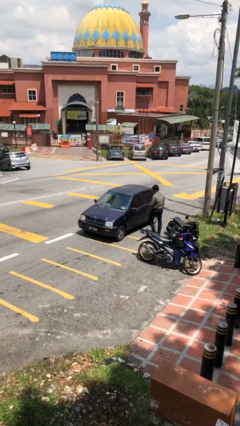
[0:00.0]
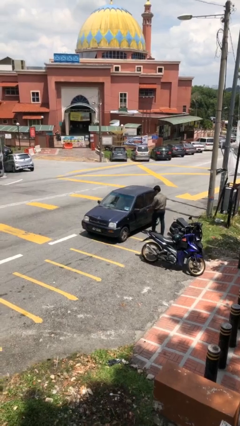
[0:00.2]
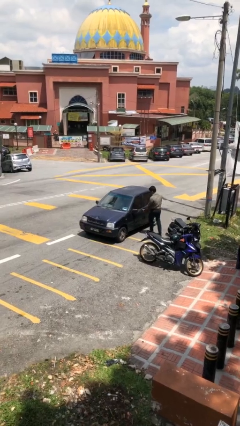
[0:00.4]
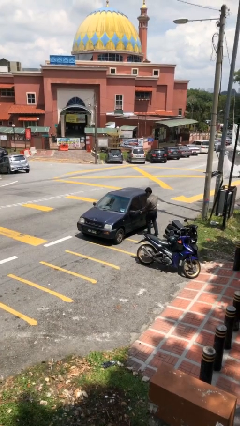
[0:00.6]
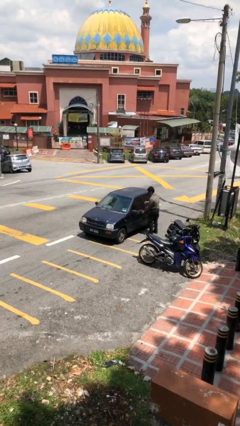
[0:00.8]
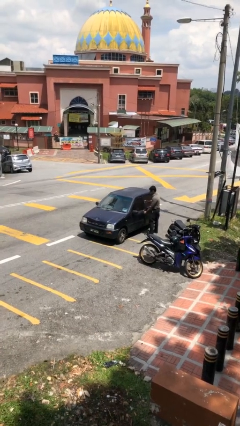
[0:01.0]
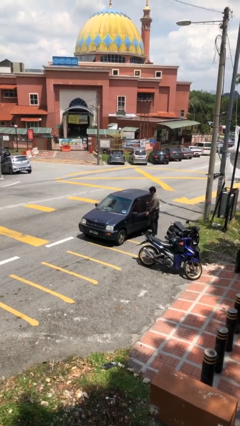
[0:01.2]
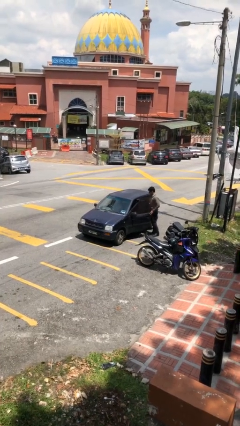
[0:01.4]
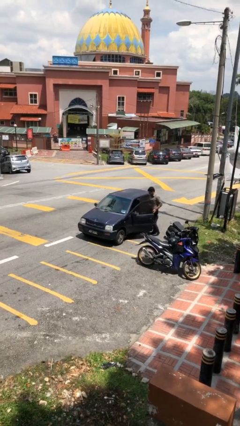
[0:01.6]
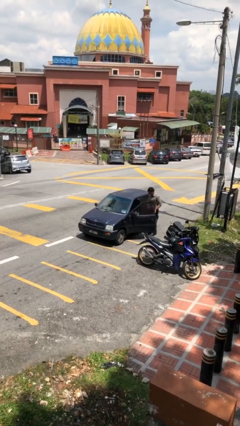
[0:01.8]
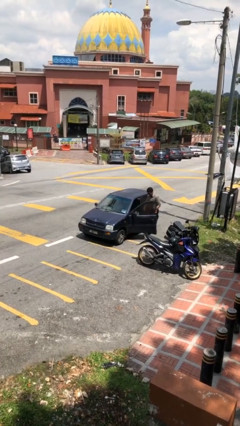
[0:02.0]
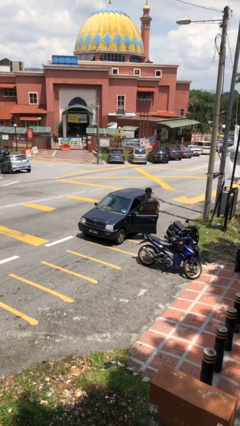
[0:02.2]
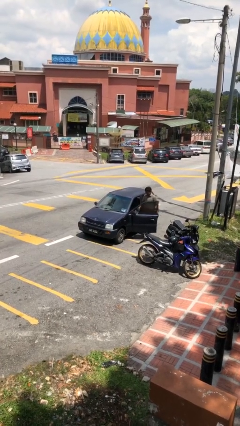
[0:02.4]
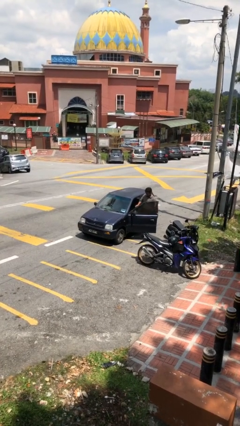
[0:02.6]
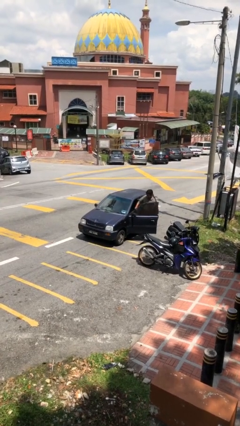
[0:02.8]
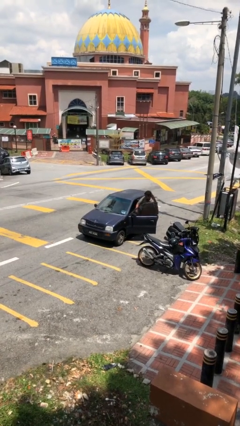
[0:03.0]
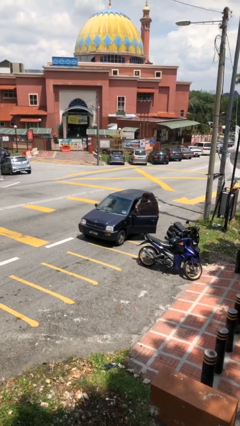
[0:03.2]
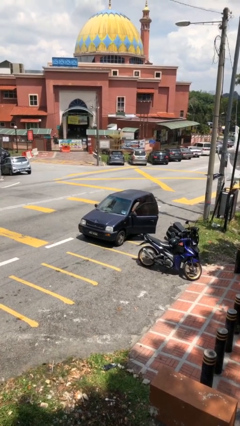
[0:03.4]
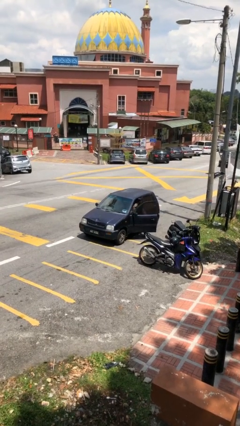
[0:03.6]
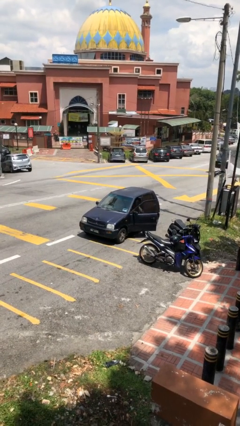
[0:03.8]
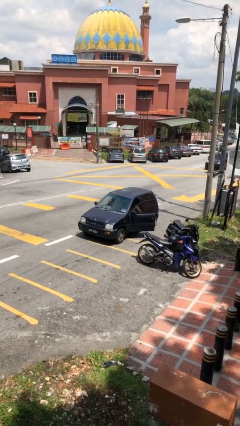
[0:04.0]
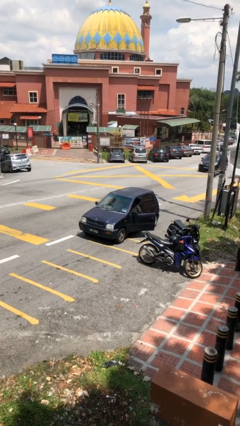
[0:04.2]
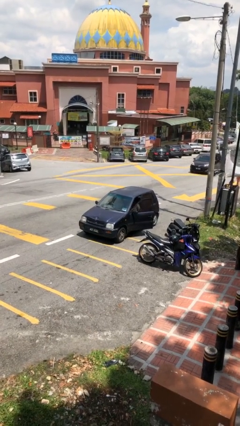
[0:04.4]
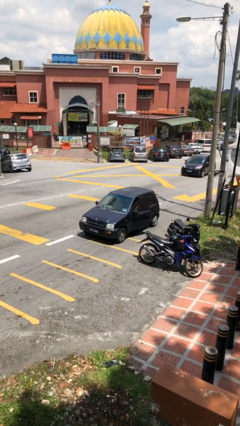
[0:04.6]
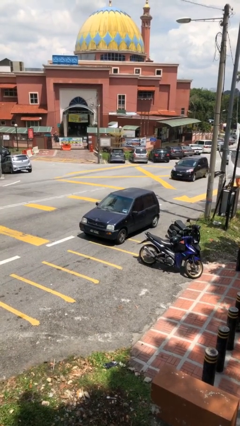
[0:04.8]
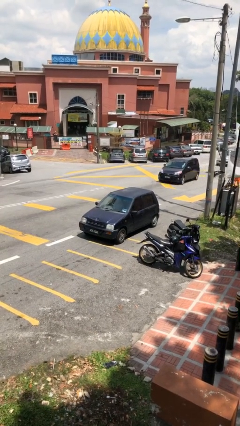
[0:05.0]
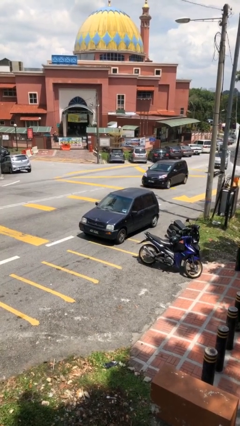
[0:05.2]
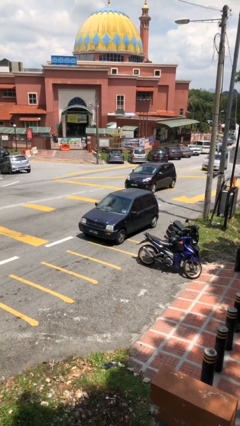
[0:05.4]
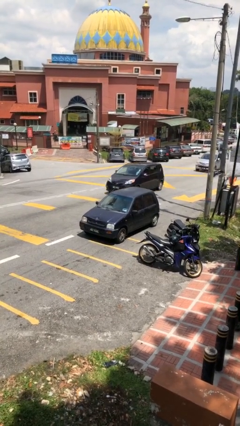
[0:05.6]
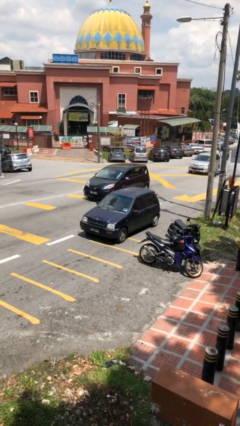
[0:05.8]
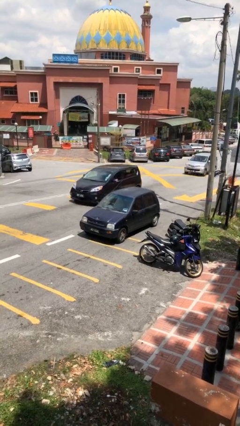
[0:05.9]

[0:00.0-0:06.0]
car picks up person

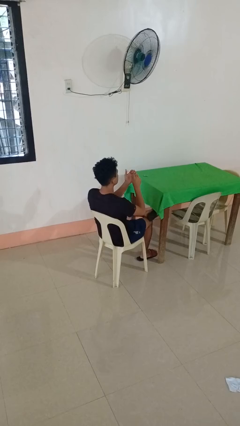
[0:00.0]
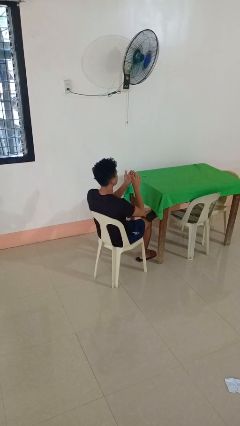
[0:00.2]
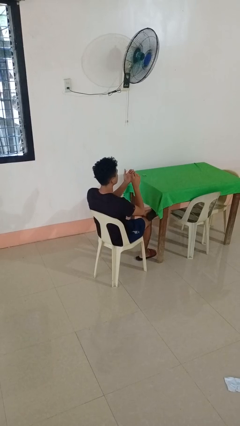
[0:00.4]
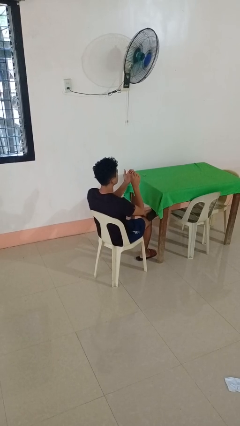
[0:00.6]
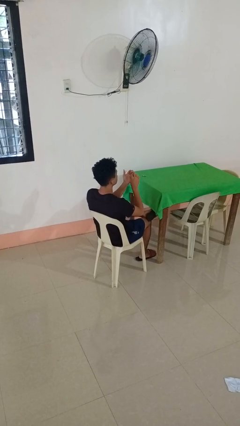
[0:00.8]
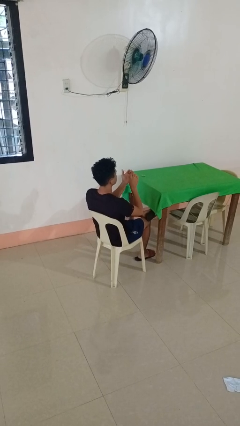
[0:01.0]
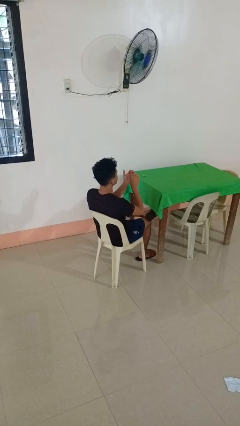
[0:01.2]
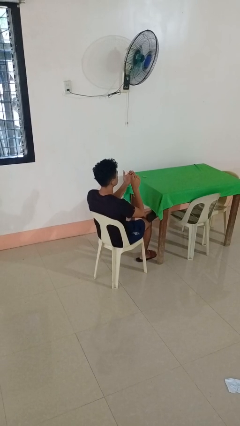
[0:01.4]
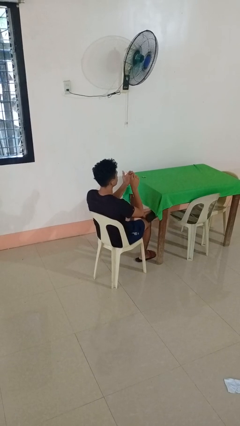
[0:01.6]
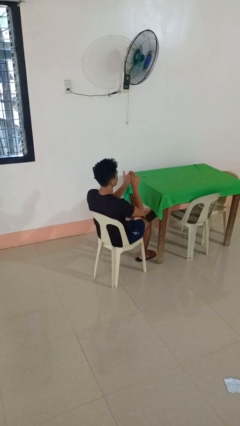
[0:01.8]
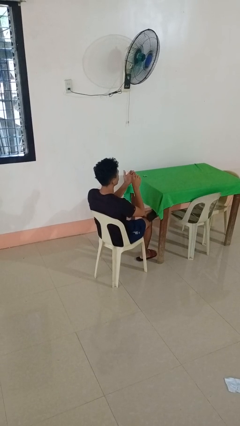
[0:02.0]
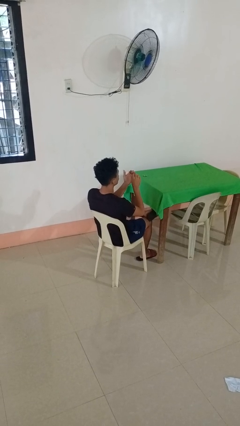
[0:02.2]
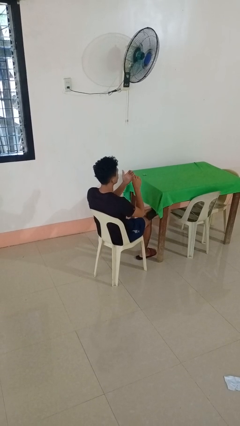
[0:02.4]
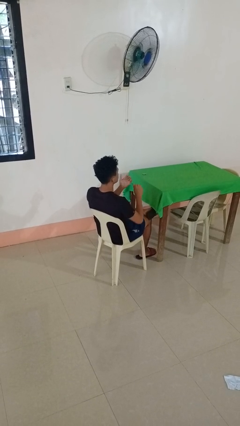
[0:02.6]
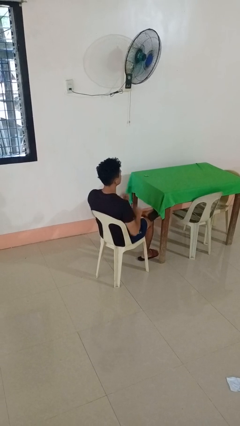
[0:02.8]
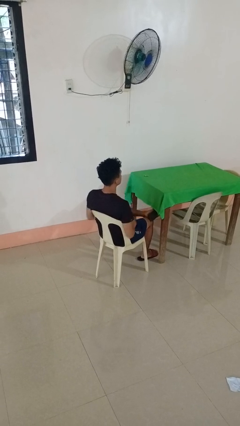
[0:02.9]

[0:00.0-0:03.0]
person files fingernails

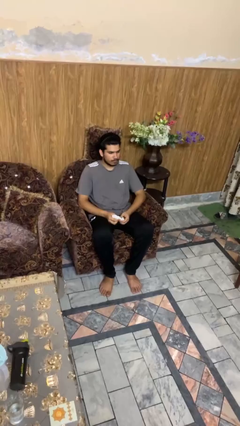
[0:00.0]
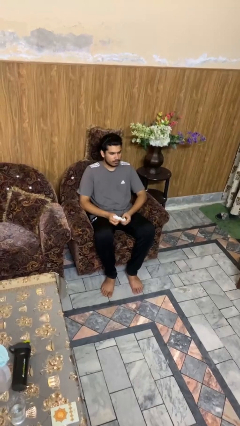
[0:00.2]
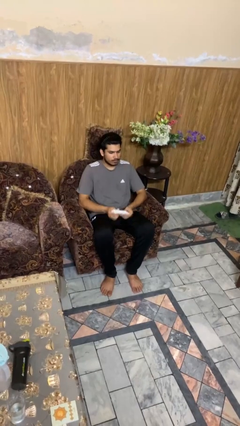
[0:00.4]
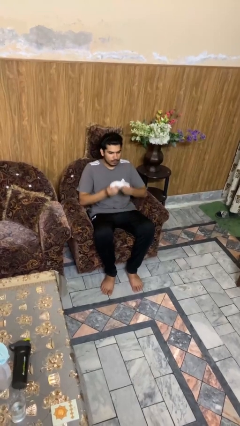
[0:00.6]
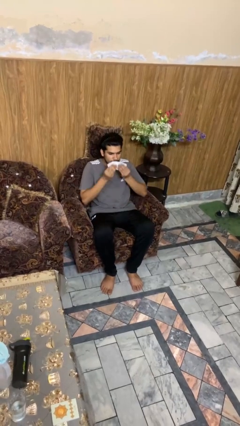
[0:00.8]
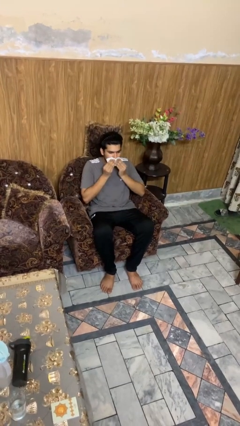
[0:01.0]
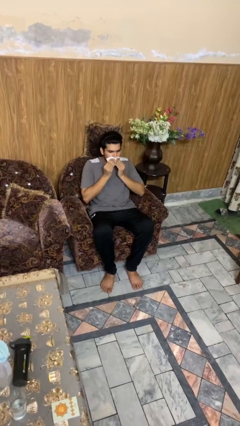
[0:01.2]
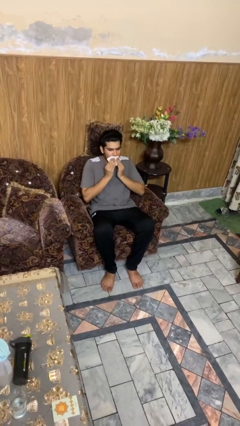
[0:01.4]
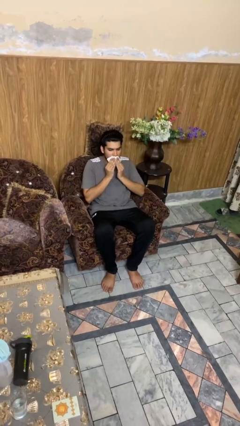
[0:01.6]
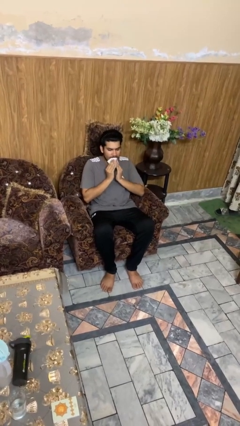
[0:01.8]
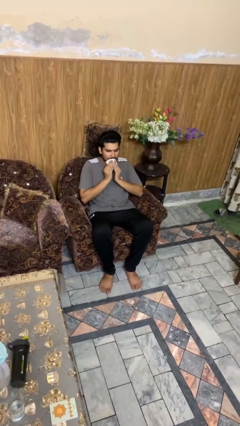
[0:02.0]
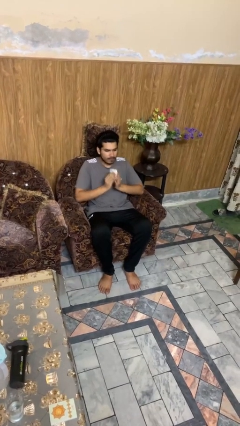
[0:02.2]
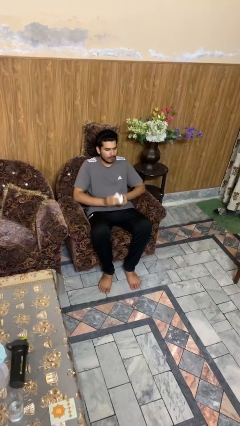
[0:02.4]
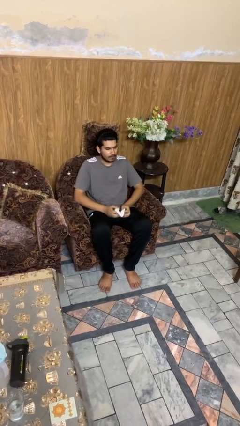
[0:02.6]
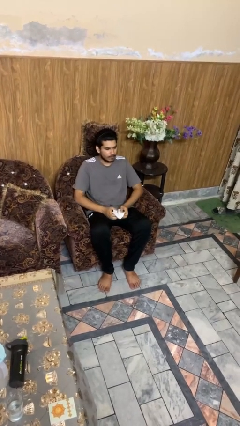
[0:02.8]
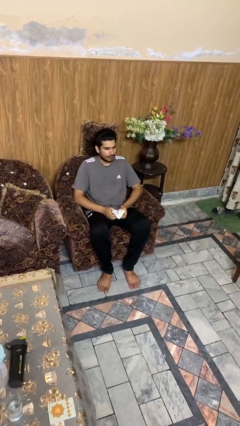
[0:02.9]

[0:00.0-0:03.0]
person wipes mouth with napkin

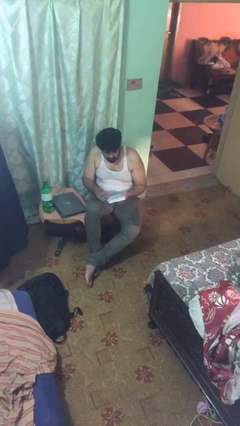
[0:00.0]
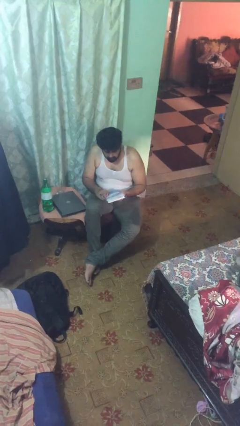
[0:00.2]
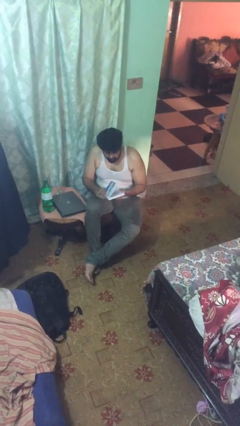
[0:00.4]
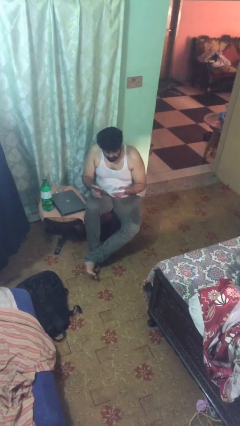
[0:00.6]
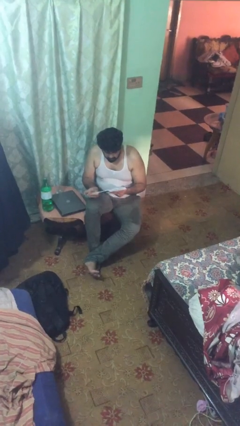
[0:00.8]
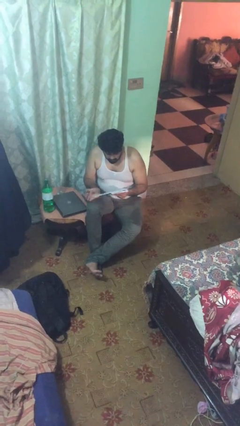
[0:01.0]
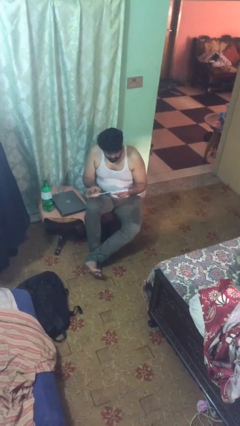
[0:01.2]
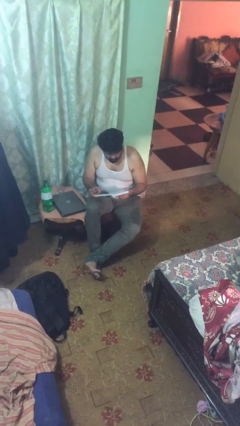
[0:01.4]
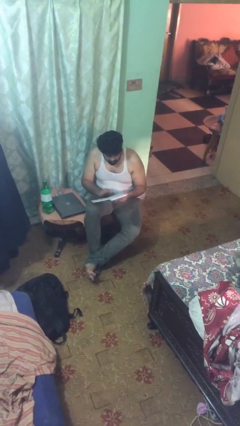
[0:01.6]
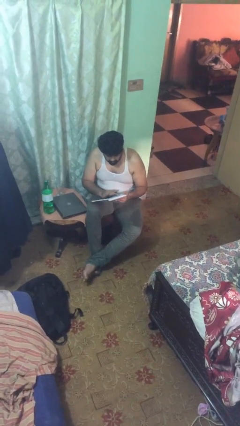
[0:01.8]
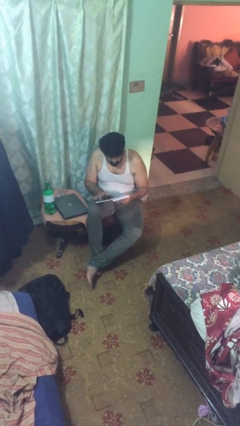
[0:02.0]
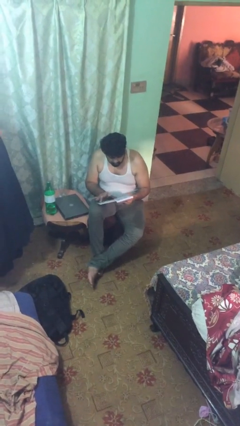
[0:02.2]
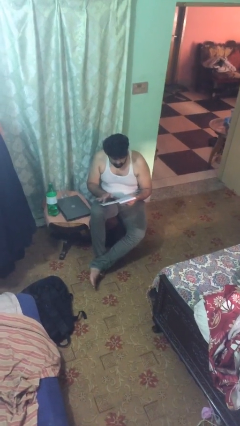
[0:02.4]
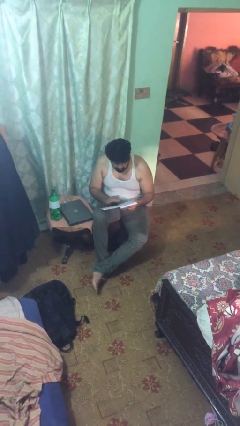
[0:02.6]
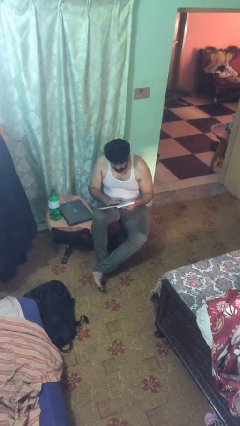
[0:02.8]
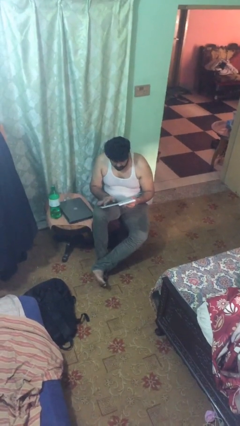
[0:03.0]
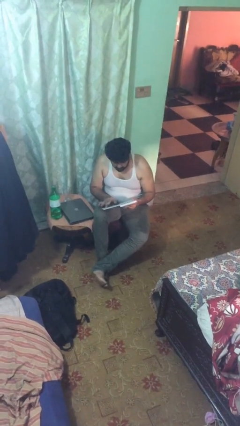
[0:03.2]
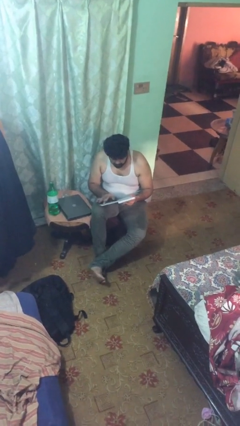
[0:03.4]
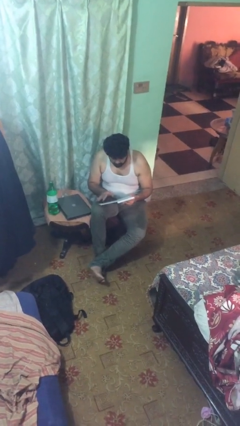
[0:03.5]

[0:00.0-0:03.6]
person reads document

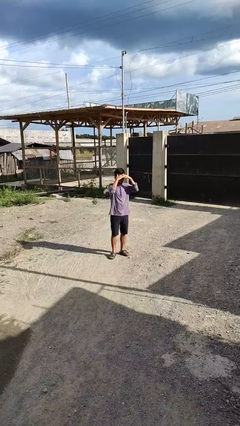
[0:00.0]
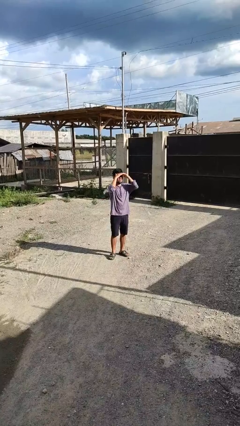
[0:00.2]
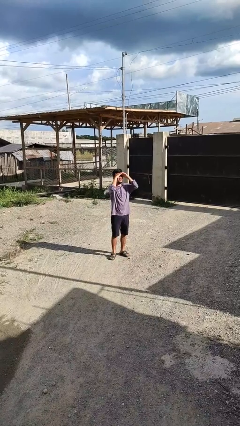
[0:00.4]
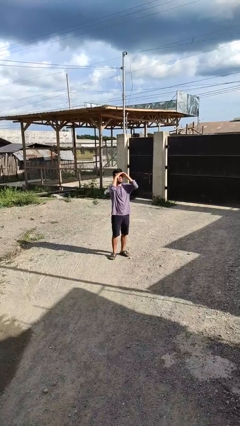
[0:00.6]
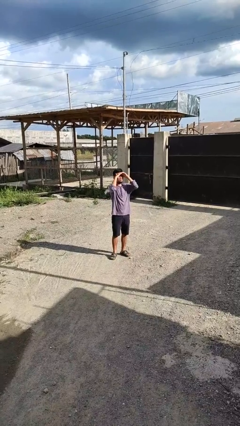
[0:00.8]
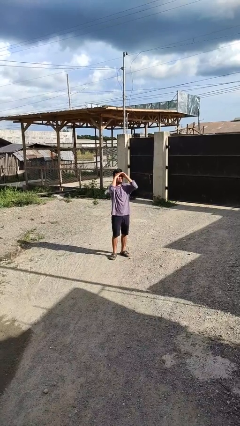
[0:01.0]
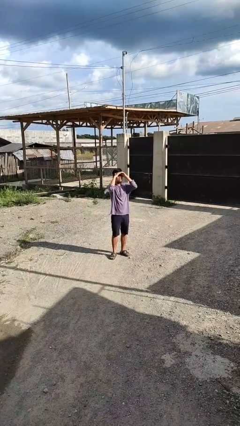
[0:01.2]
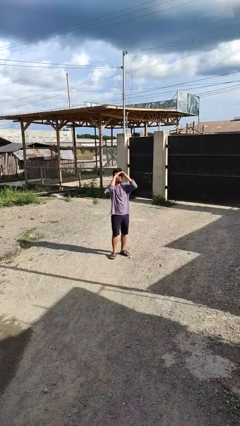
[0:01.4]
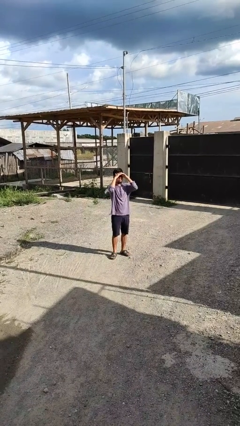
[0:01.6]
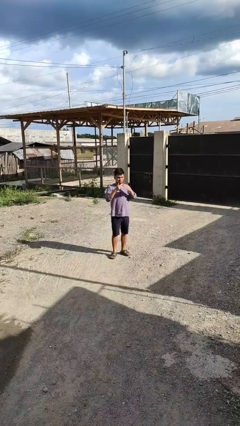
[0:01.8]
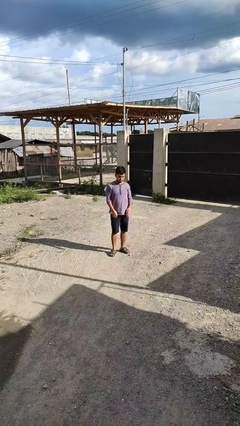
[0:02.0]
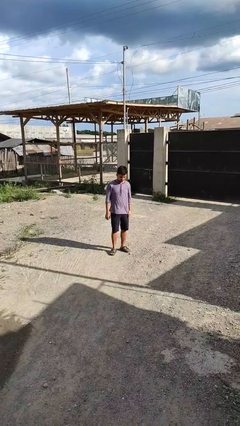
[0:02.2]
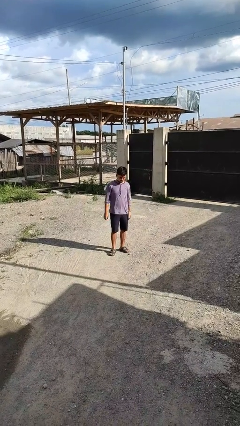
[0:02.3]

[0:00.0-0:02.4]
person shades eyes
